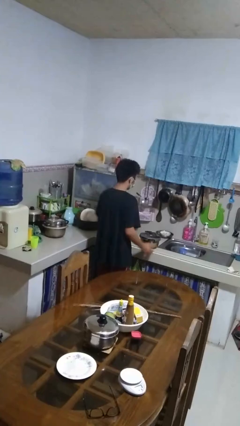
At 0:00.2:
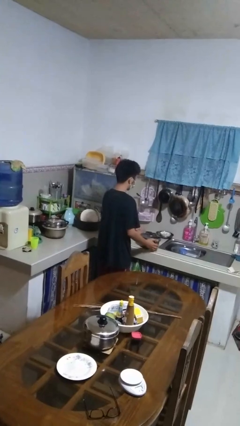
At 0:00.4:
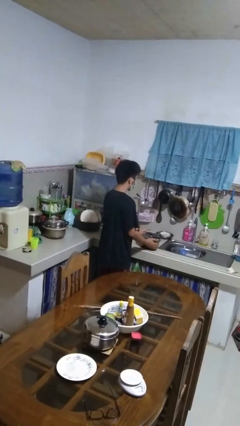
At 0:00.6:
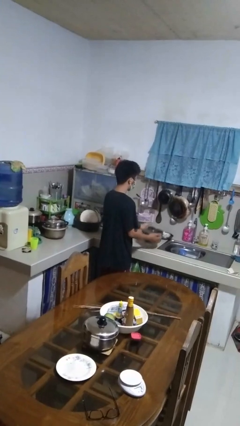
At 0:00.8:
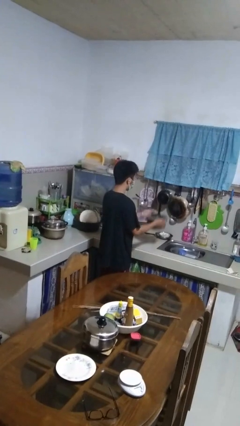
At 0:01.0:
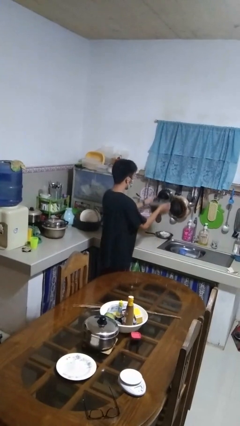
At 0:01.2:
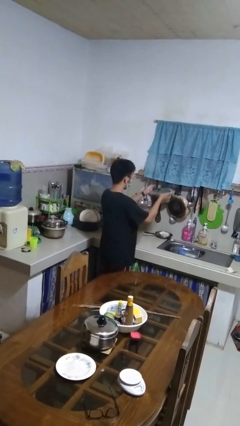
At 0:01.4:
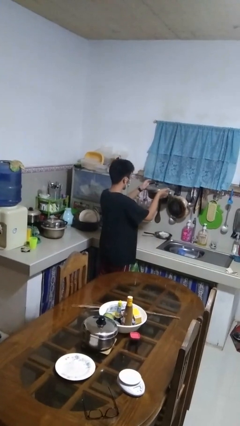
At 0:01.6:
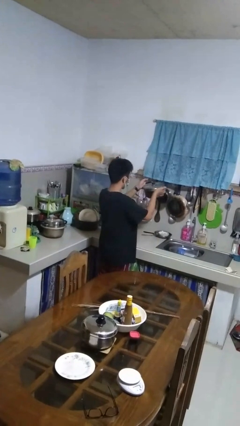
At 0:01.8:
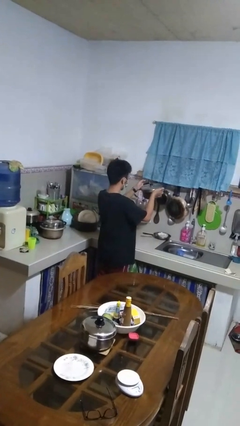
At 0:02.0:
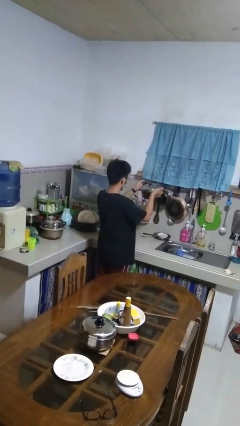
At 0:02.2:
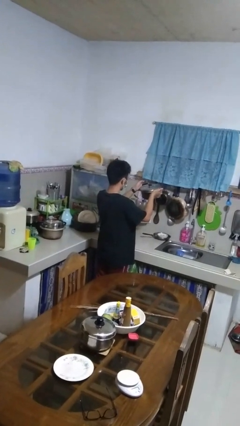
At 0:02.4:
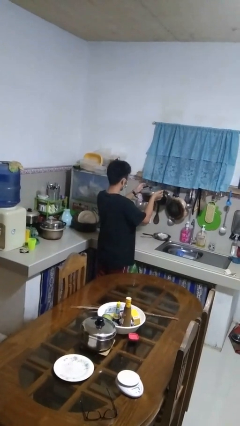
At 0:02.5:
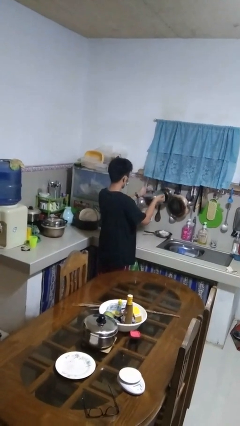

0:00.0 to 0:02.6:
person picks up object from countertop

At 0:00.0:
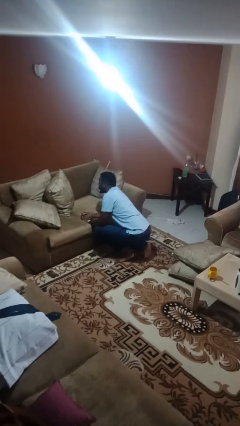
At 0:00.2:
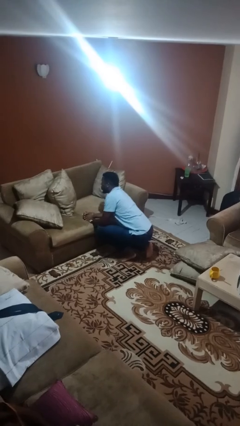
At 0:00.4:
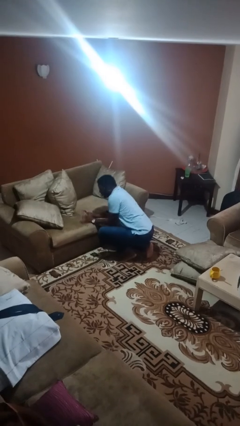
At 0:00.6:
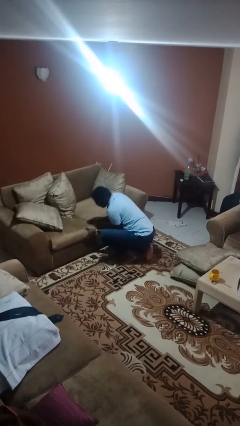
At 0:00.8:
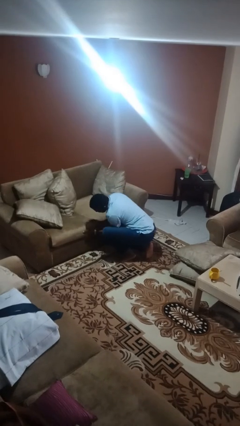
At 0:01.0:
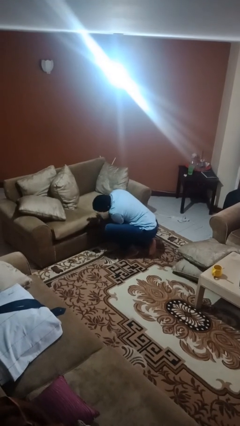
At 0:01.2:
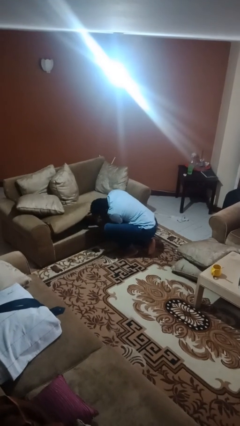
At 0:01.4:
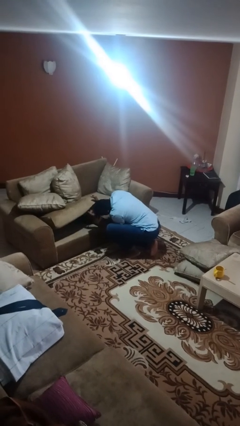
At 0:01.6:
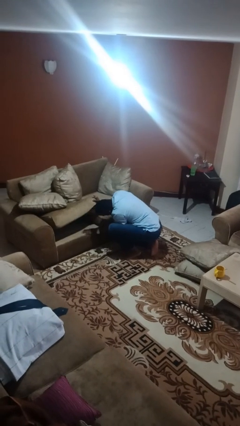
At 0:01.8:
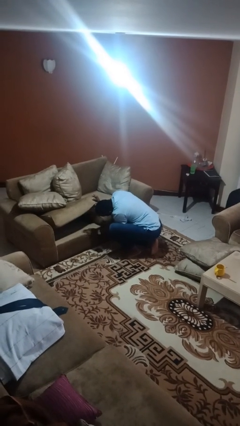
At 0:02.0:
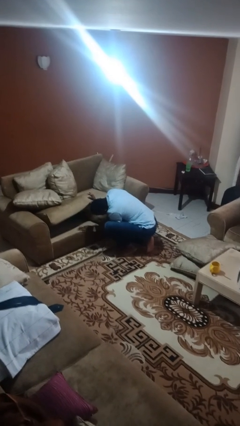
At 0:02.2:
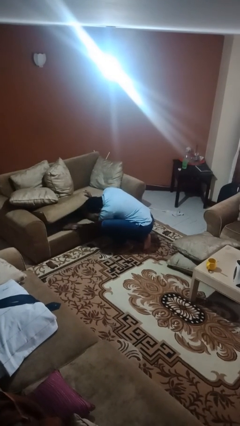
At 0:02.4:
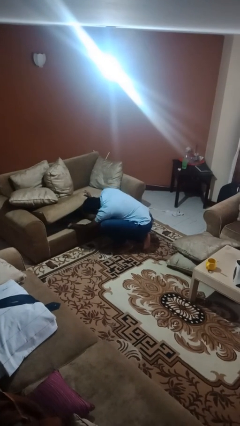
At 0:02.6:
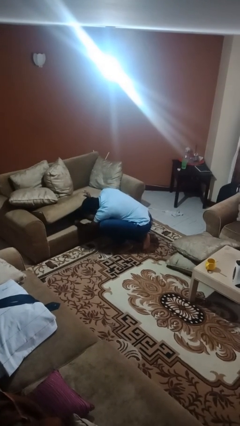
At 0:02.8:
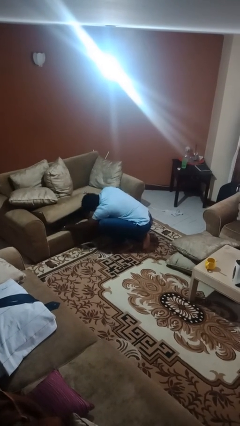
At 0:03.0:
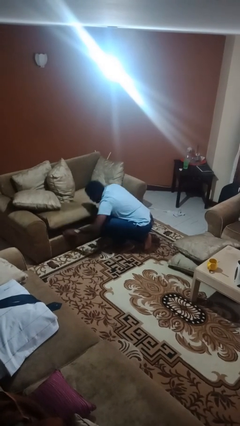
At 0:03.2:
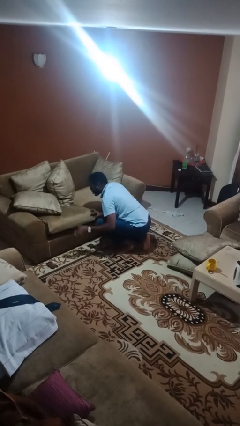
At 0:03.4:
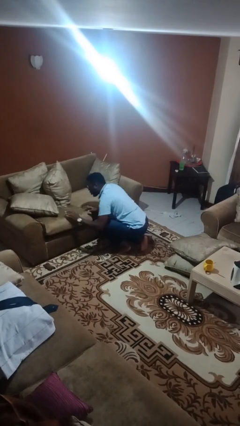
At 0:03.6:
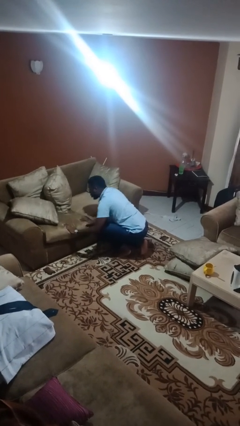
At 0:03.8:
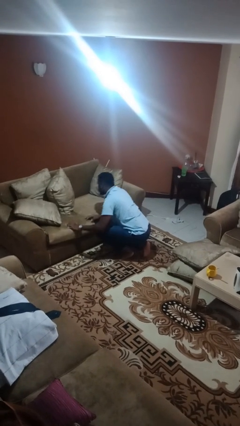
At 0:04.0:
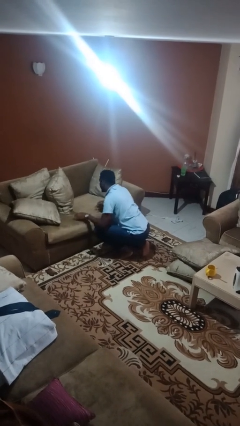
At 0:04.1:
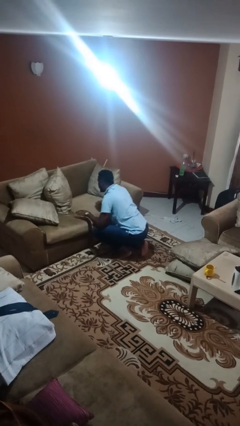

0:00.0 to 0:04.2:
person searches under couch

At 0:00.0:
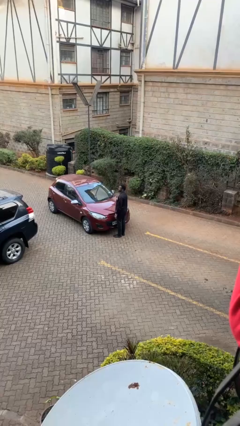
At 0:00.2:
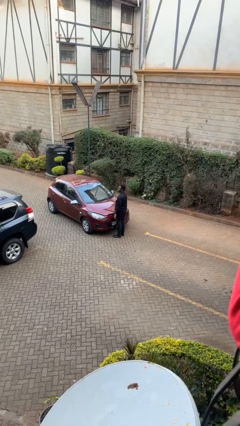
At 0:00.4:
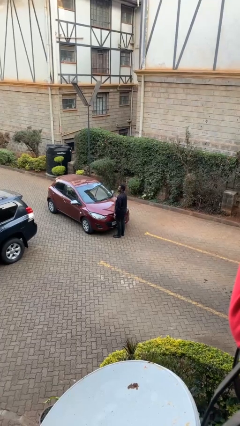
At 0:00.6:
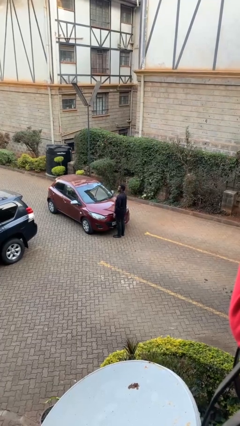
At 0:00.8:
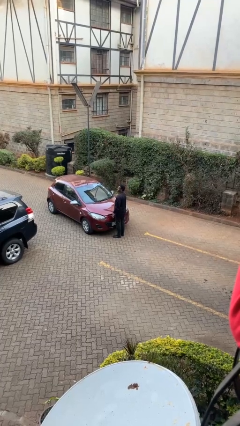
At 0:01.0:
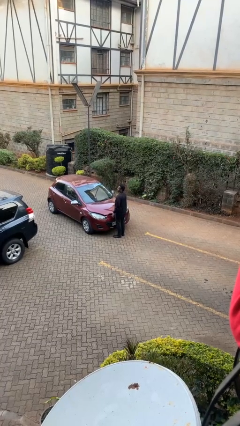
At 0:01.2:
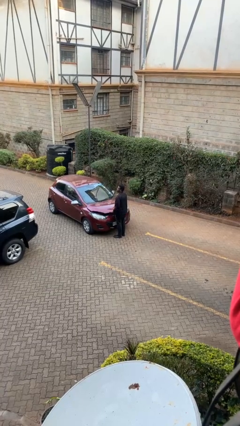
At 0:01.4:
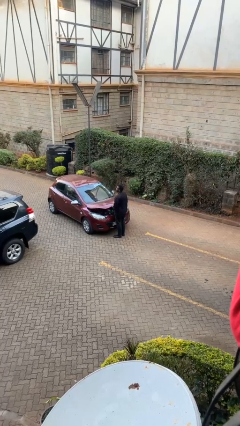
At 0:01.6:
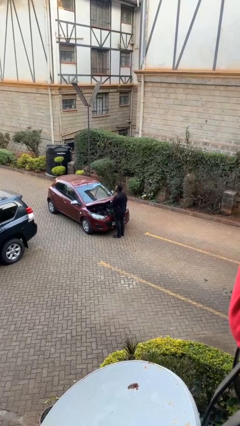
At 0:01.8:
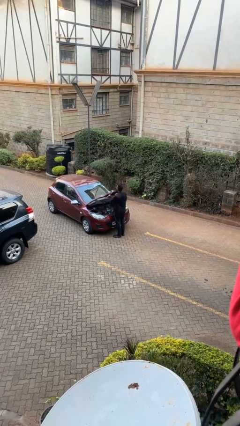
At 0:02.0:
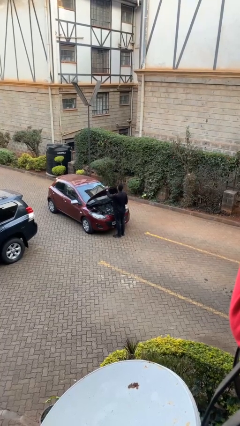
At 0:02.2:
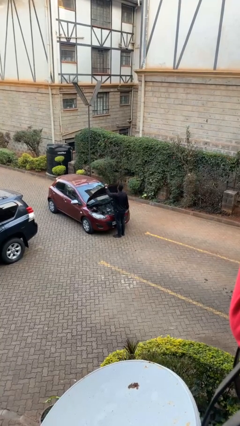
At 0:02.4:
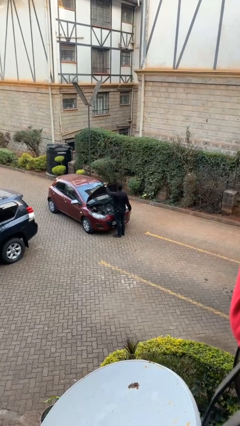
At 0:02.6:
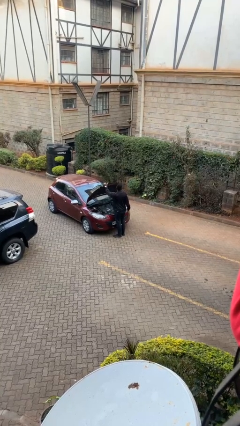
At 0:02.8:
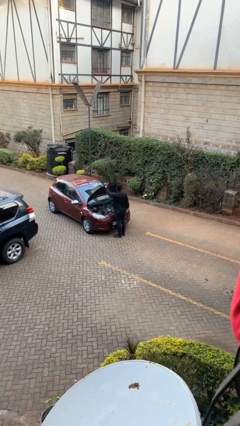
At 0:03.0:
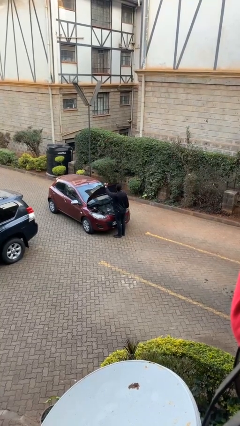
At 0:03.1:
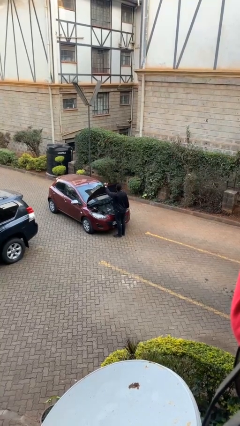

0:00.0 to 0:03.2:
person opens car hood

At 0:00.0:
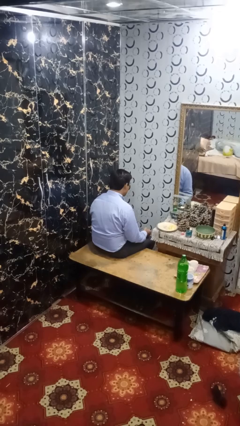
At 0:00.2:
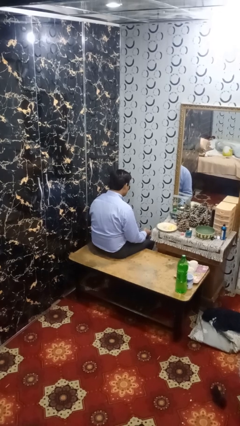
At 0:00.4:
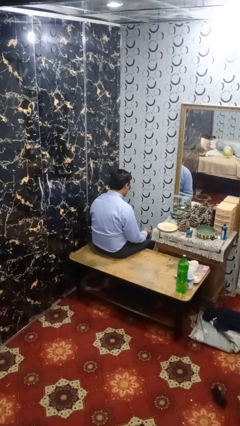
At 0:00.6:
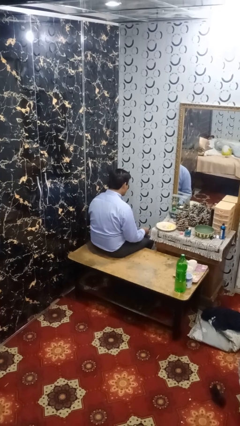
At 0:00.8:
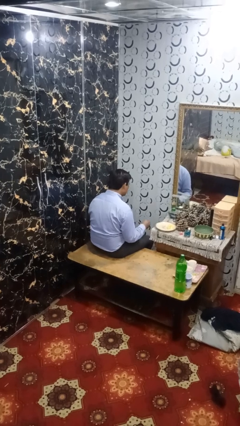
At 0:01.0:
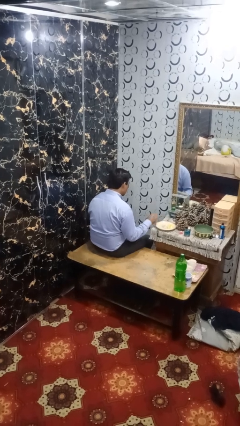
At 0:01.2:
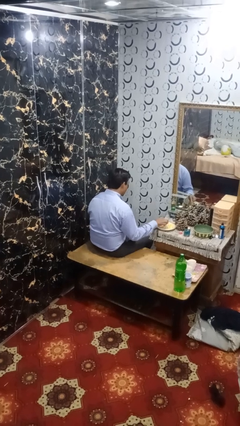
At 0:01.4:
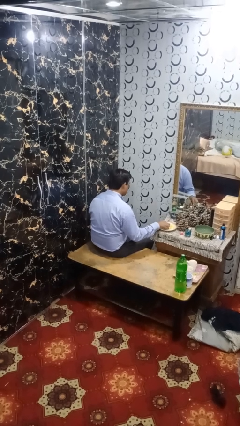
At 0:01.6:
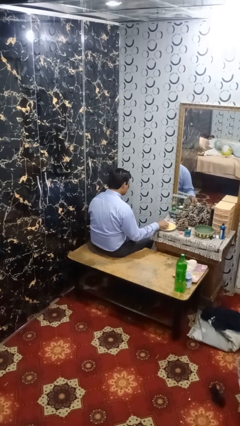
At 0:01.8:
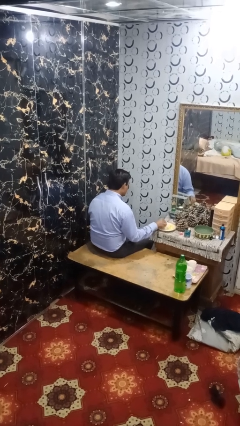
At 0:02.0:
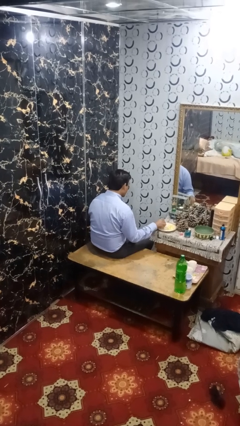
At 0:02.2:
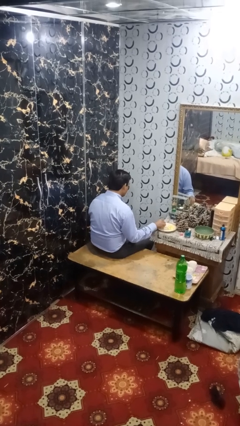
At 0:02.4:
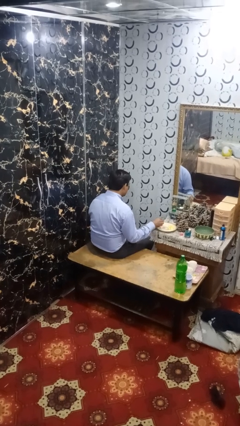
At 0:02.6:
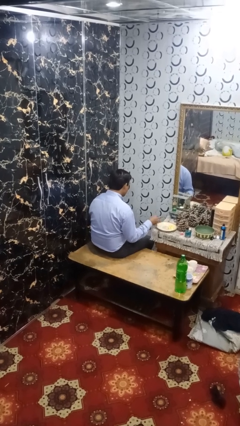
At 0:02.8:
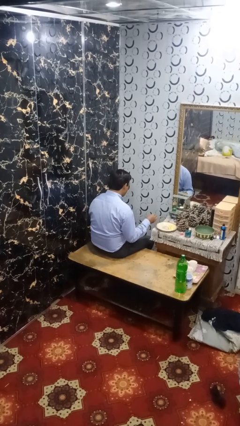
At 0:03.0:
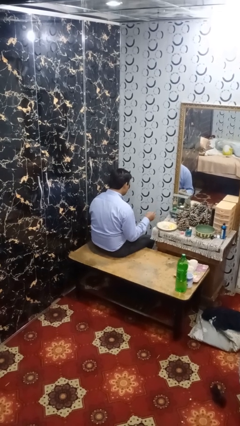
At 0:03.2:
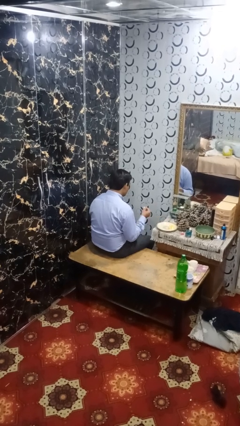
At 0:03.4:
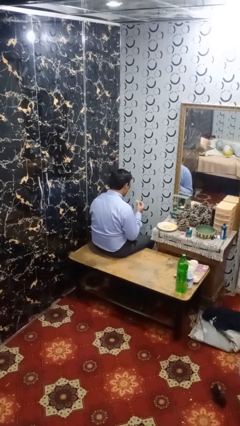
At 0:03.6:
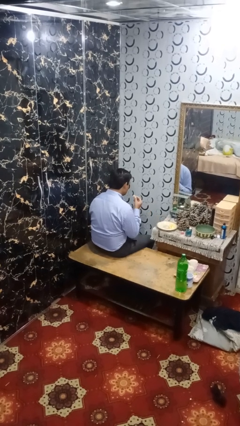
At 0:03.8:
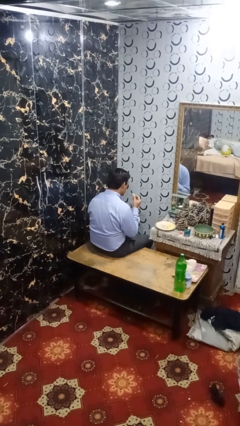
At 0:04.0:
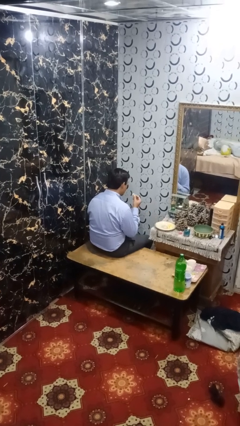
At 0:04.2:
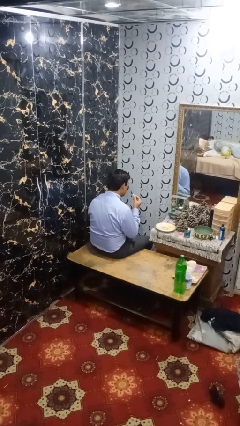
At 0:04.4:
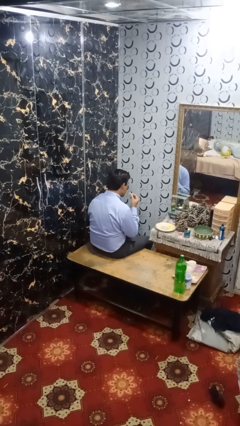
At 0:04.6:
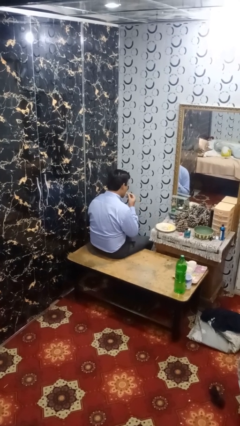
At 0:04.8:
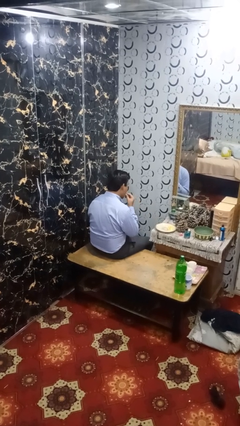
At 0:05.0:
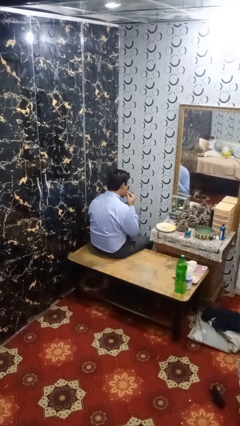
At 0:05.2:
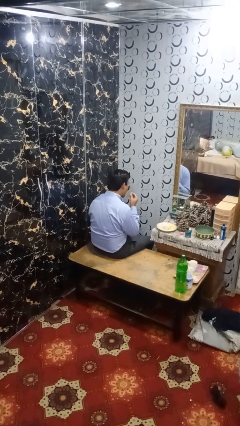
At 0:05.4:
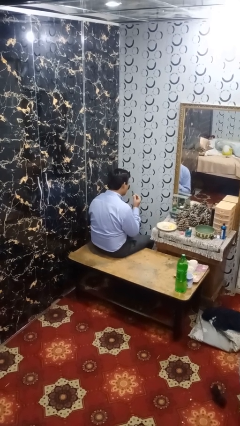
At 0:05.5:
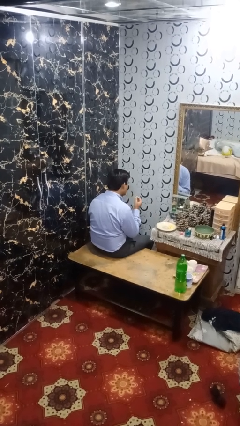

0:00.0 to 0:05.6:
person eats with hands

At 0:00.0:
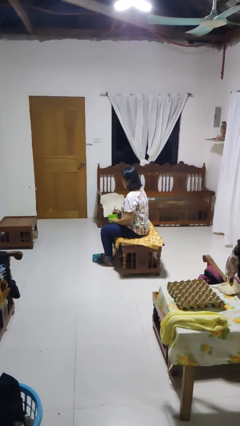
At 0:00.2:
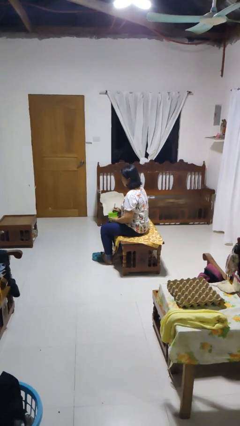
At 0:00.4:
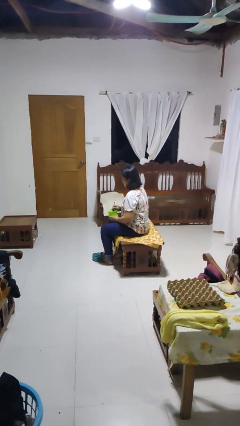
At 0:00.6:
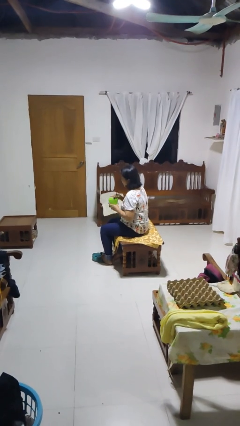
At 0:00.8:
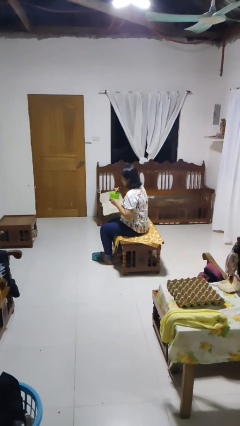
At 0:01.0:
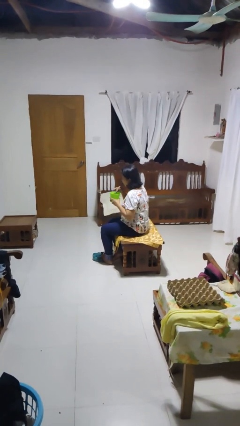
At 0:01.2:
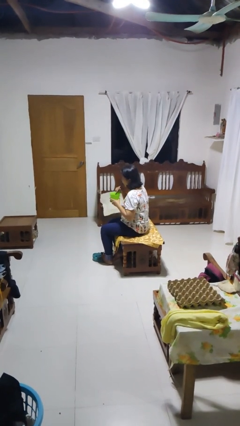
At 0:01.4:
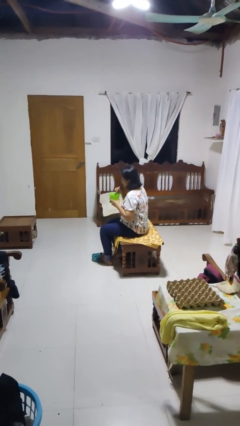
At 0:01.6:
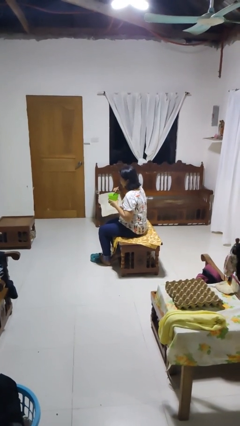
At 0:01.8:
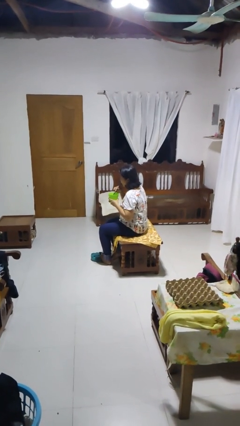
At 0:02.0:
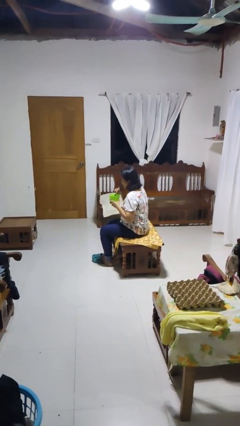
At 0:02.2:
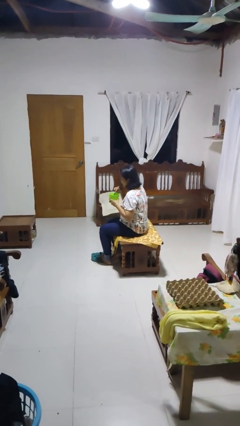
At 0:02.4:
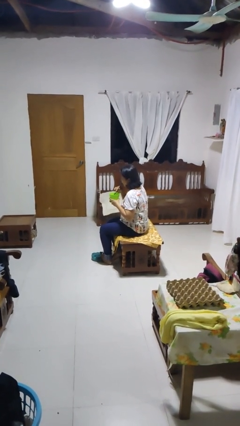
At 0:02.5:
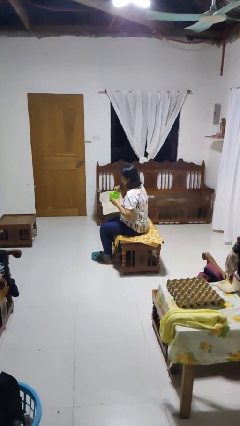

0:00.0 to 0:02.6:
person drinks from straw
